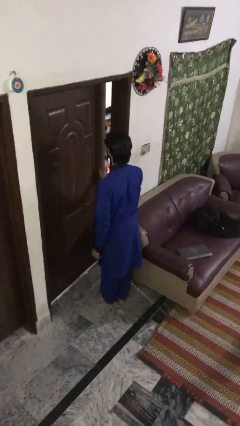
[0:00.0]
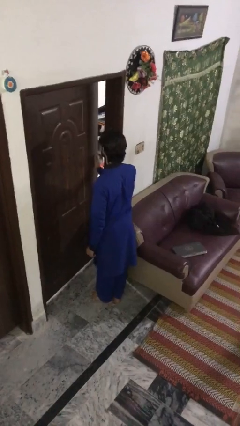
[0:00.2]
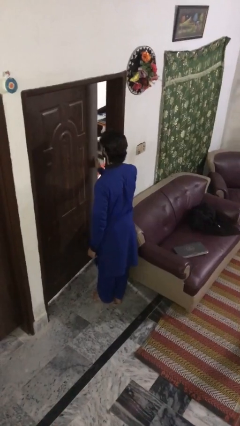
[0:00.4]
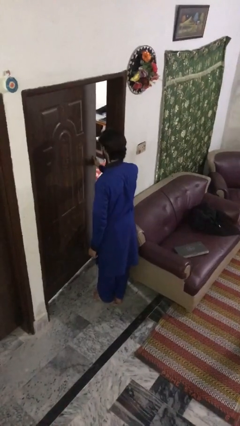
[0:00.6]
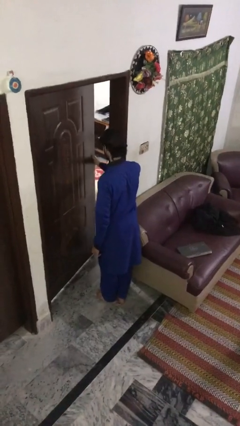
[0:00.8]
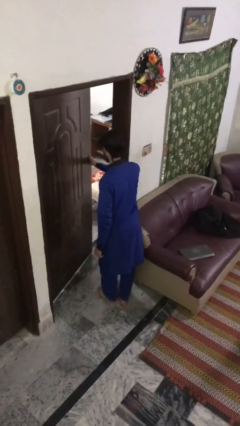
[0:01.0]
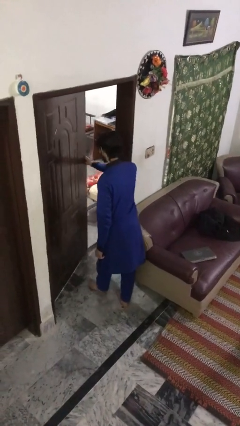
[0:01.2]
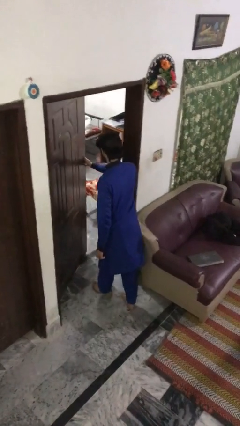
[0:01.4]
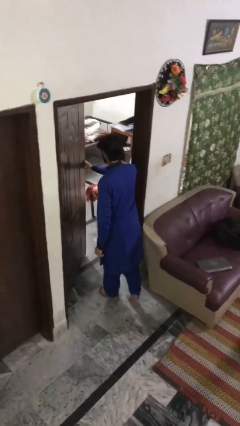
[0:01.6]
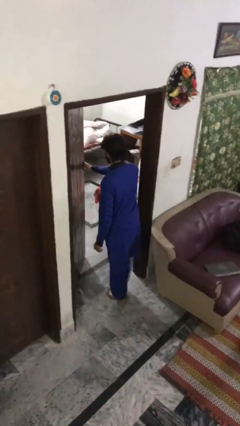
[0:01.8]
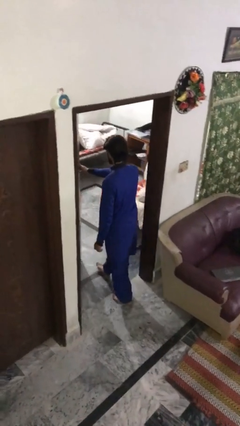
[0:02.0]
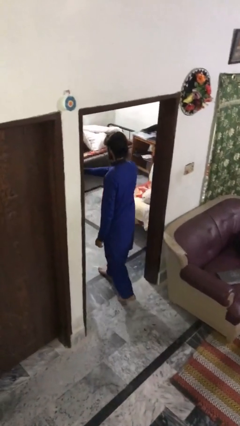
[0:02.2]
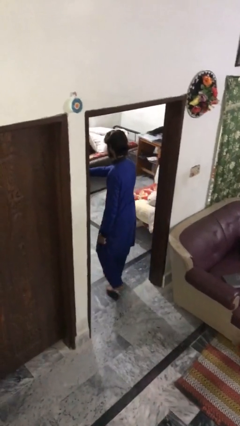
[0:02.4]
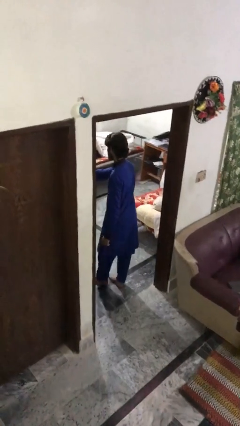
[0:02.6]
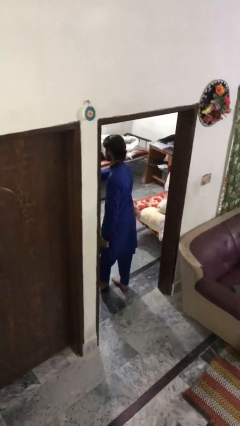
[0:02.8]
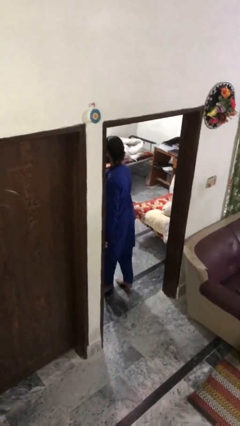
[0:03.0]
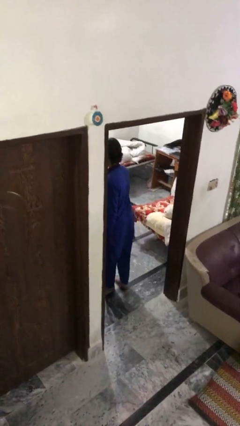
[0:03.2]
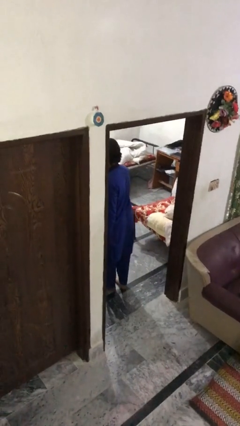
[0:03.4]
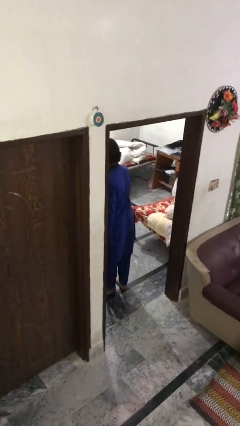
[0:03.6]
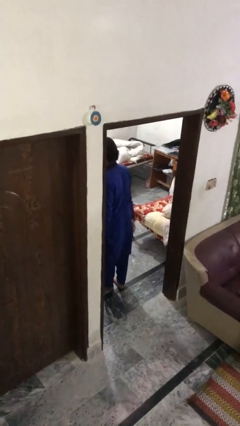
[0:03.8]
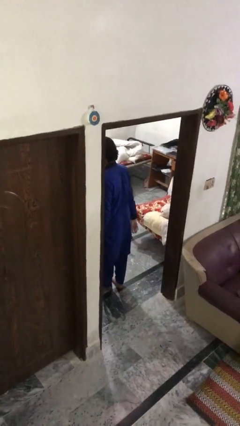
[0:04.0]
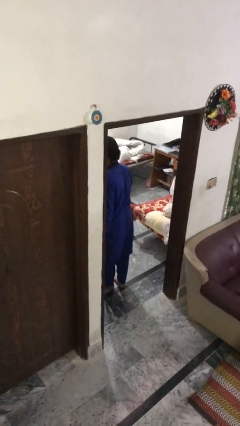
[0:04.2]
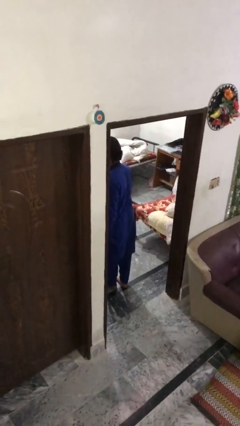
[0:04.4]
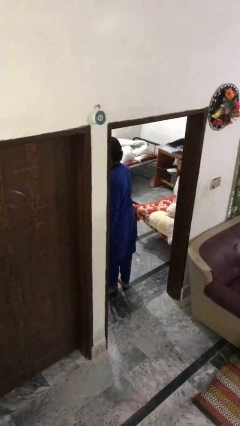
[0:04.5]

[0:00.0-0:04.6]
person opens facility door

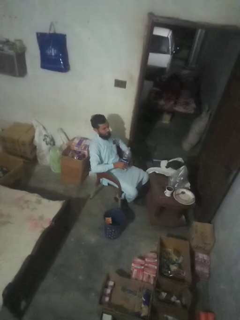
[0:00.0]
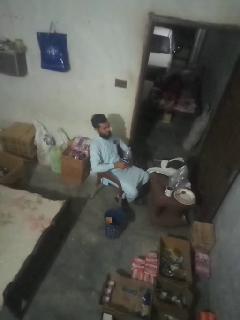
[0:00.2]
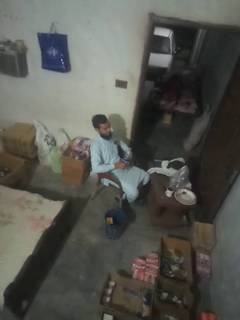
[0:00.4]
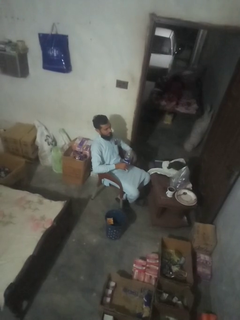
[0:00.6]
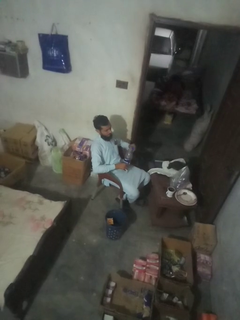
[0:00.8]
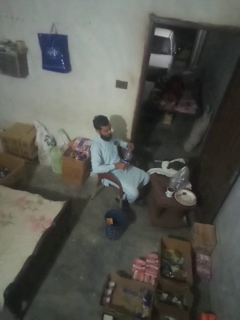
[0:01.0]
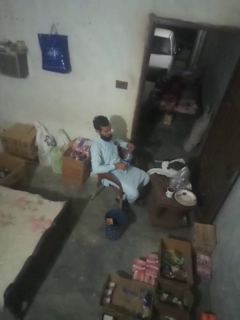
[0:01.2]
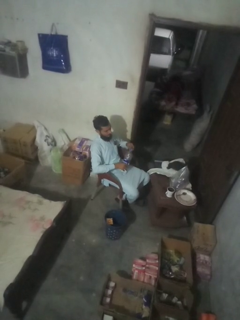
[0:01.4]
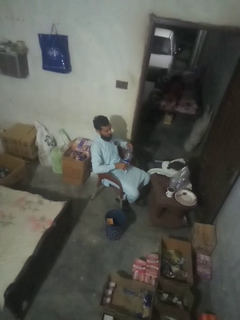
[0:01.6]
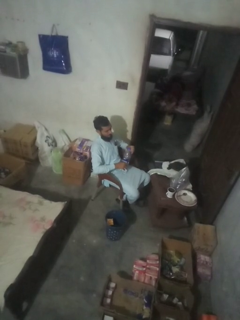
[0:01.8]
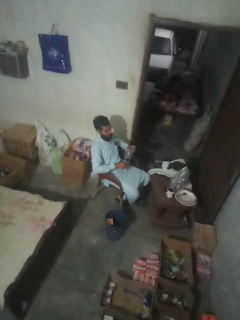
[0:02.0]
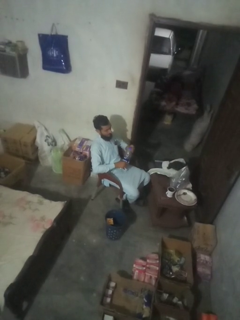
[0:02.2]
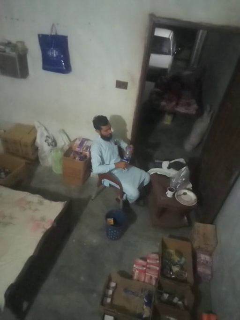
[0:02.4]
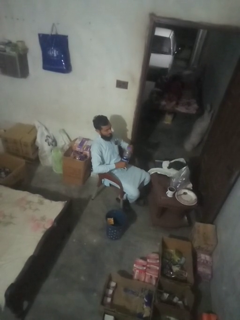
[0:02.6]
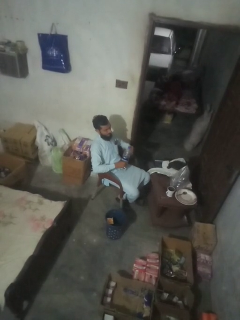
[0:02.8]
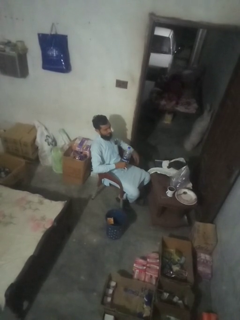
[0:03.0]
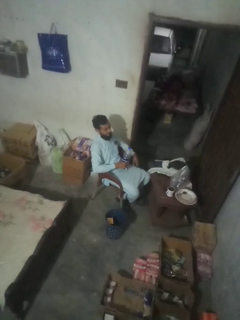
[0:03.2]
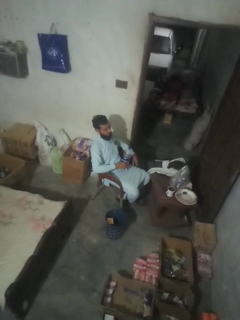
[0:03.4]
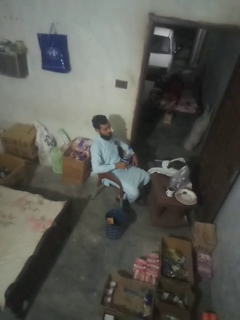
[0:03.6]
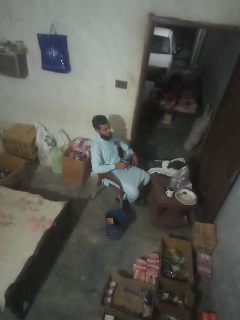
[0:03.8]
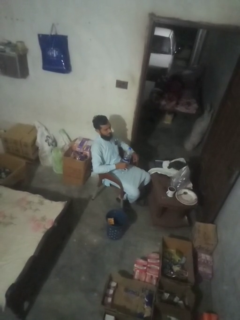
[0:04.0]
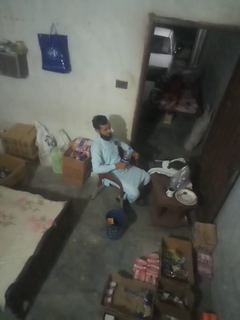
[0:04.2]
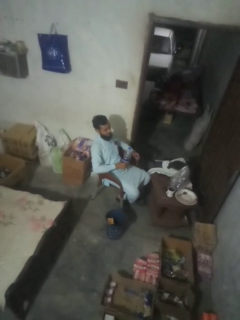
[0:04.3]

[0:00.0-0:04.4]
person screws lid to bottle

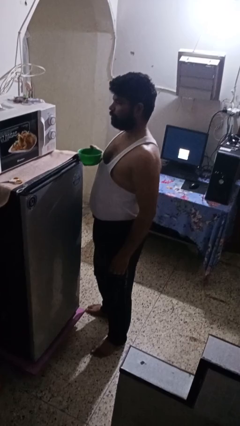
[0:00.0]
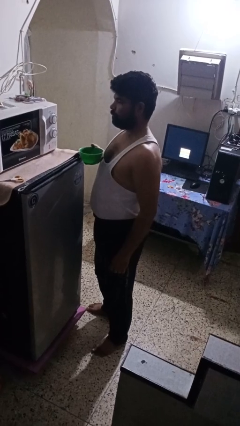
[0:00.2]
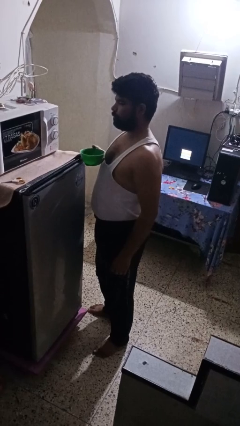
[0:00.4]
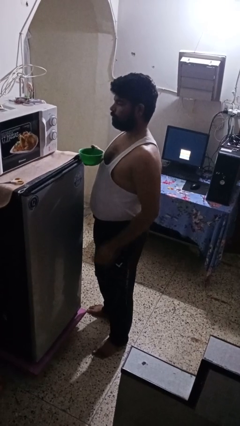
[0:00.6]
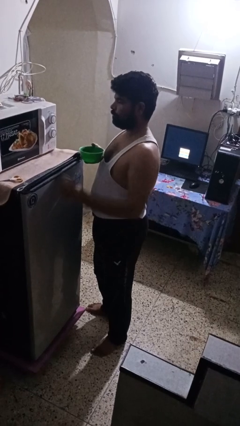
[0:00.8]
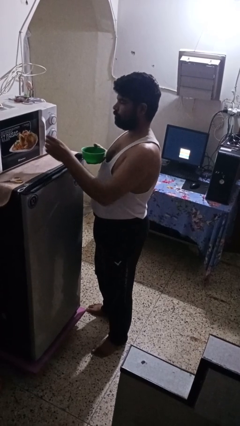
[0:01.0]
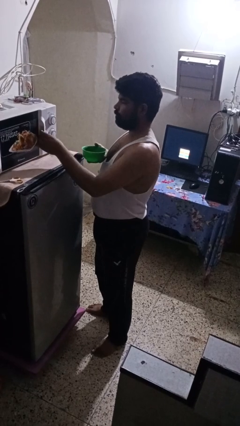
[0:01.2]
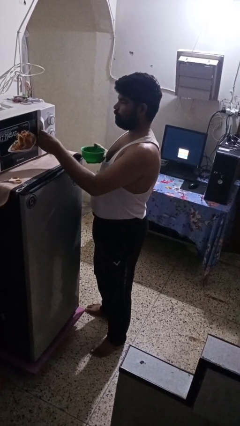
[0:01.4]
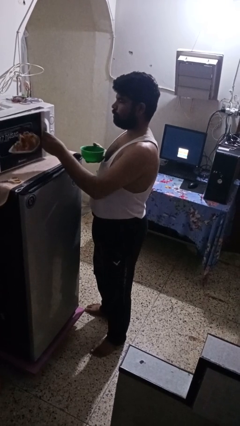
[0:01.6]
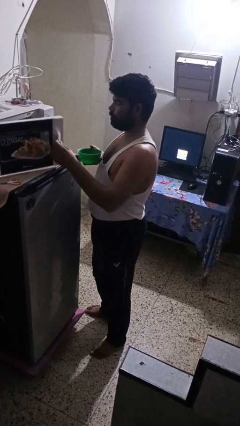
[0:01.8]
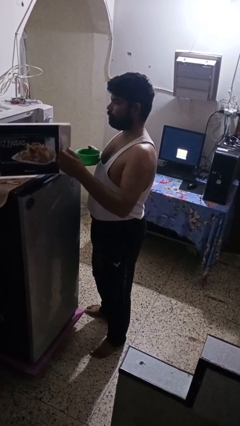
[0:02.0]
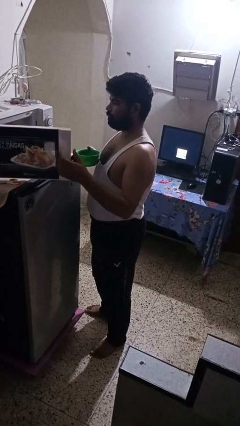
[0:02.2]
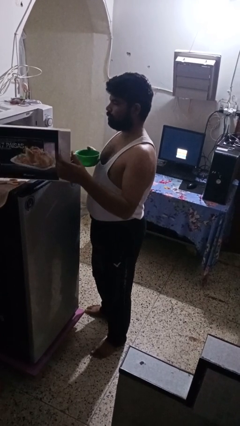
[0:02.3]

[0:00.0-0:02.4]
person opens microwave

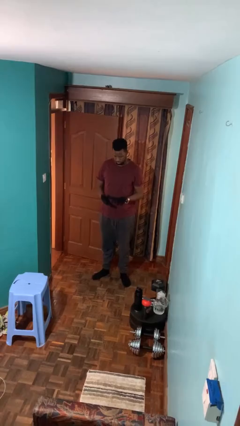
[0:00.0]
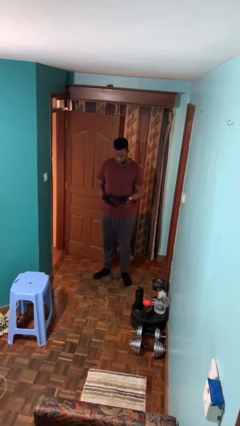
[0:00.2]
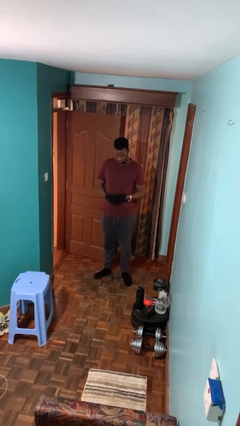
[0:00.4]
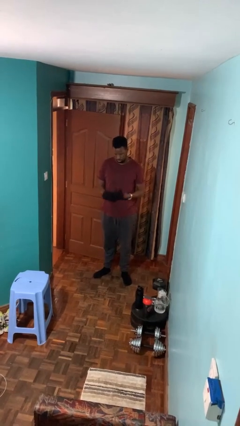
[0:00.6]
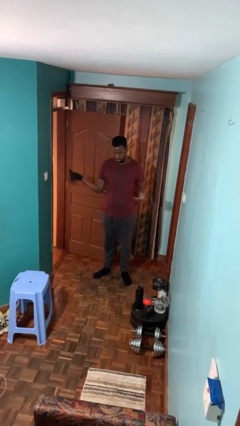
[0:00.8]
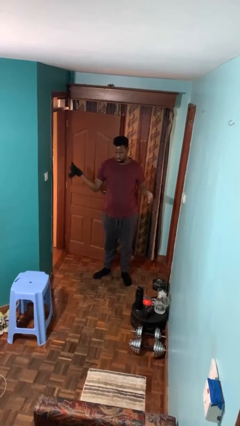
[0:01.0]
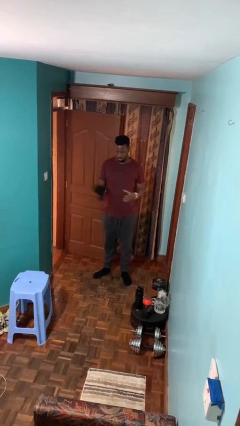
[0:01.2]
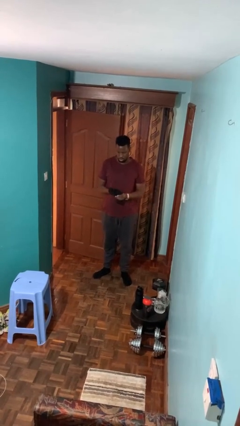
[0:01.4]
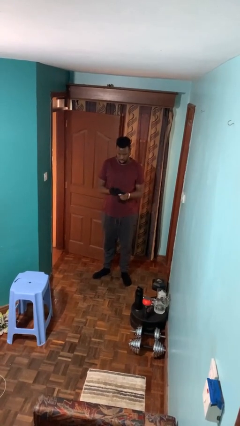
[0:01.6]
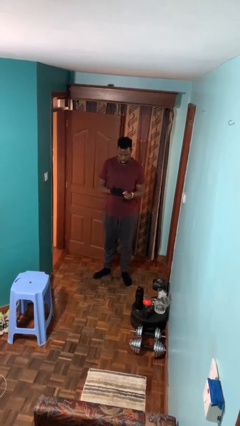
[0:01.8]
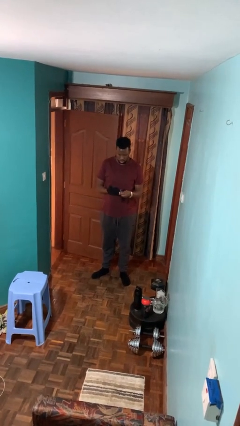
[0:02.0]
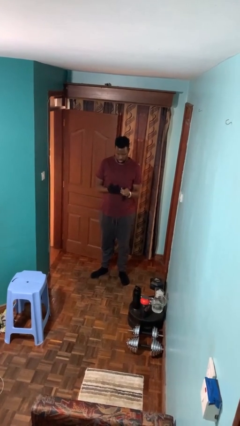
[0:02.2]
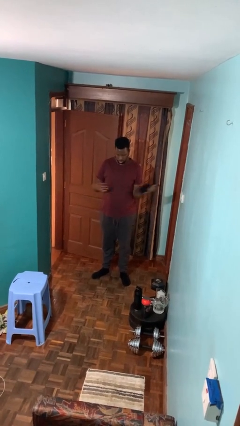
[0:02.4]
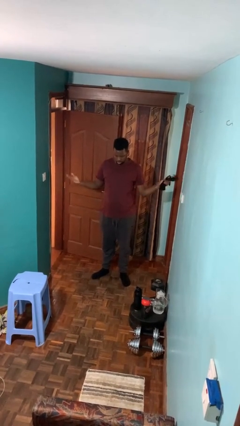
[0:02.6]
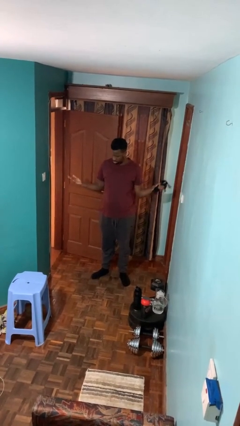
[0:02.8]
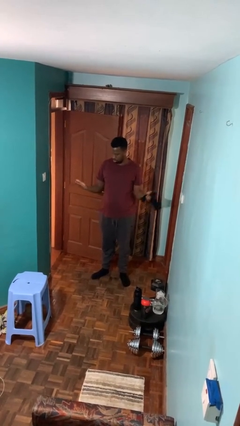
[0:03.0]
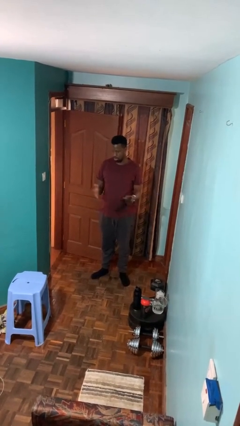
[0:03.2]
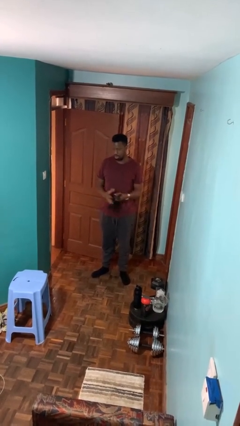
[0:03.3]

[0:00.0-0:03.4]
person takes off gloves

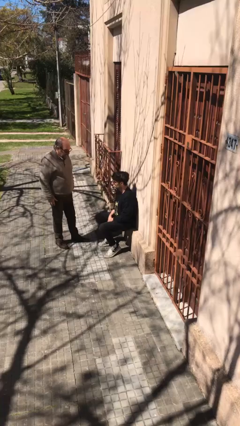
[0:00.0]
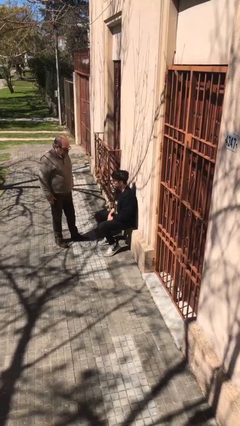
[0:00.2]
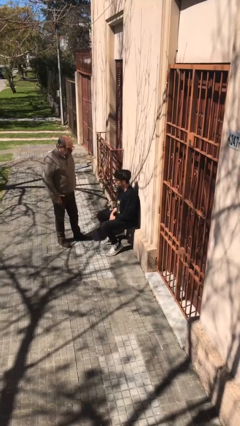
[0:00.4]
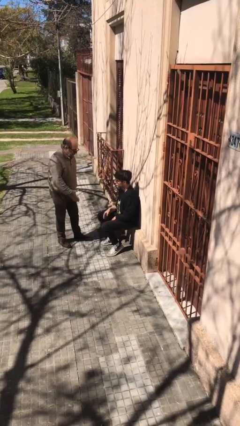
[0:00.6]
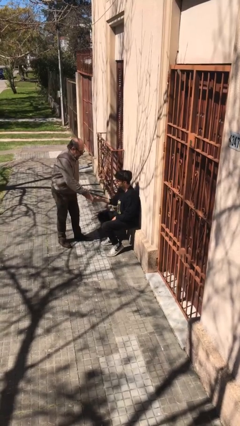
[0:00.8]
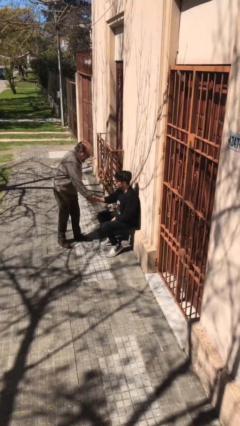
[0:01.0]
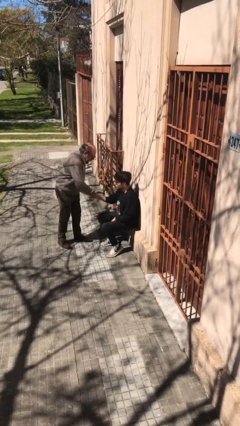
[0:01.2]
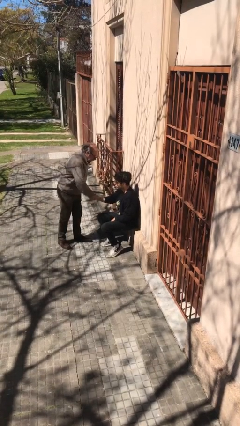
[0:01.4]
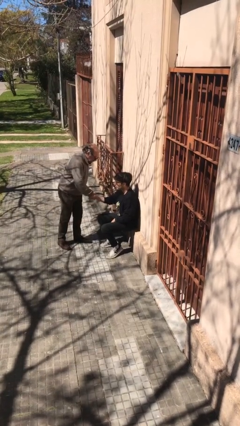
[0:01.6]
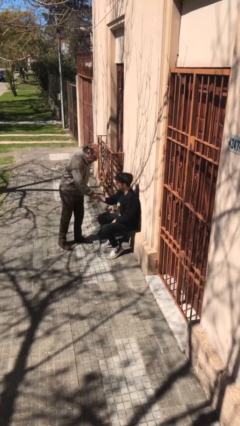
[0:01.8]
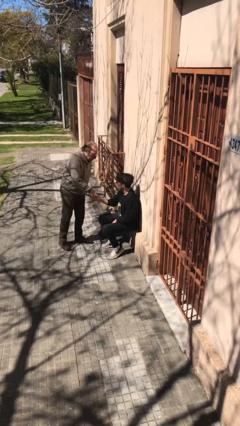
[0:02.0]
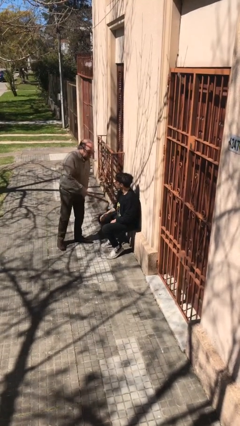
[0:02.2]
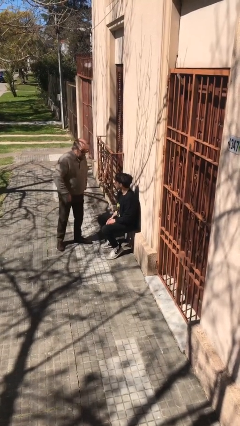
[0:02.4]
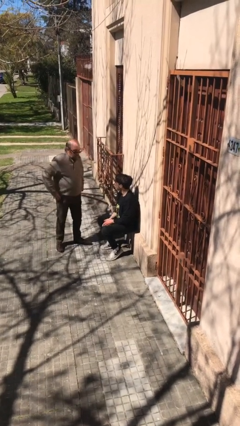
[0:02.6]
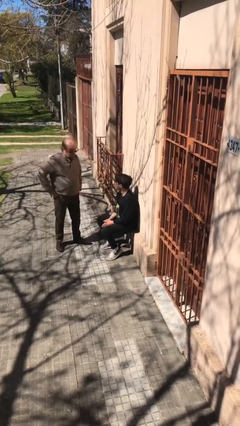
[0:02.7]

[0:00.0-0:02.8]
person shakes hand

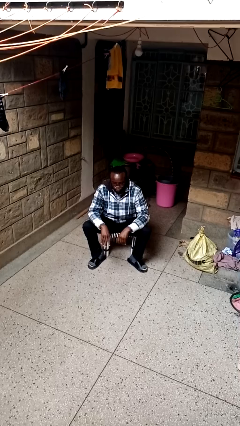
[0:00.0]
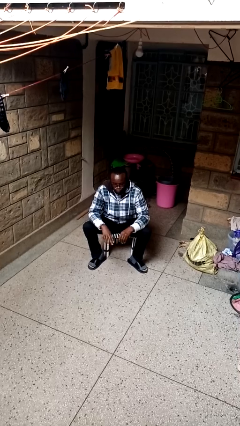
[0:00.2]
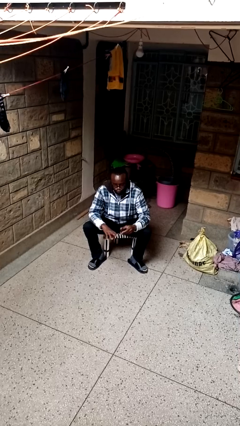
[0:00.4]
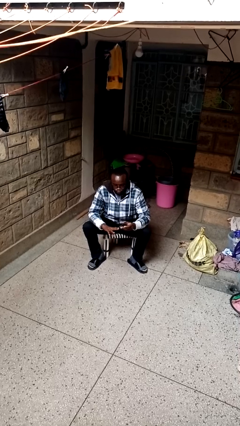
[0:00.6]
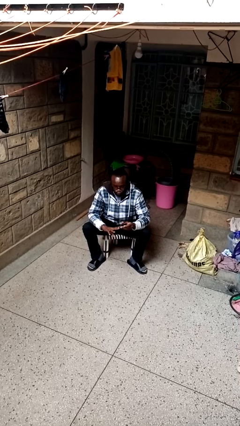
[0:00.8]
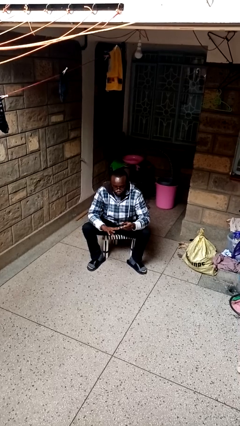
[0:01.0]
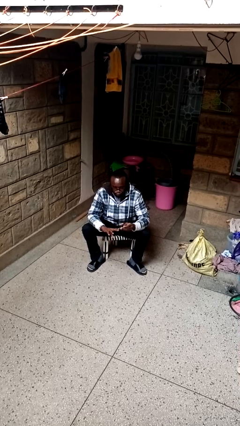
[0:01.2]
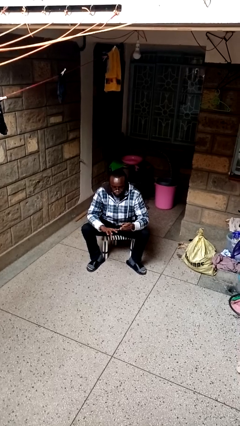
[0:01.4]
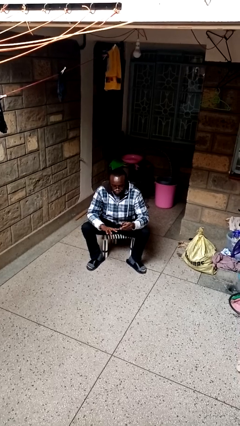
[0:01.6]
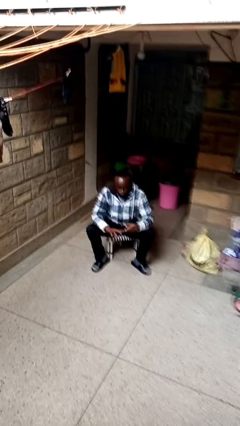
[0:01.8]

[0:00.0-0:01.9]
person clips fingernails
